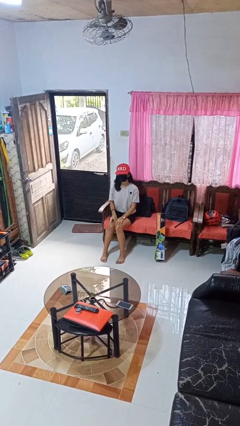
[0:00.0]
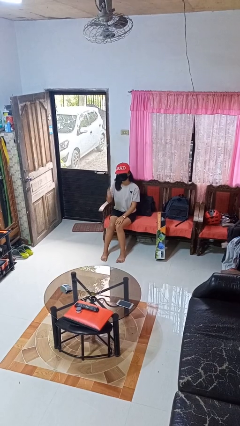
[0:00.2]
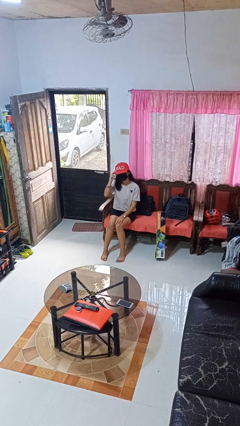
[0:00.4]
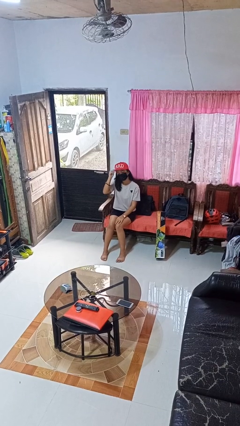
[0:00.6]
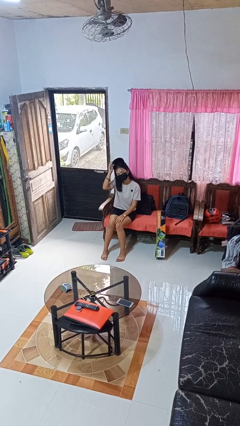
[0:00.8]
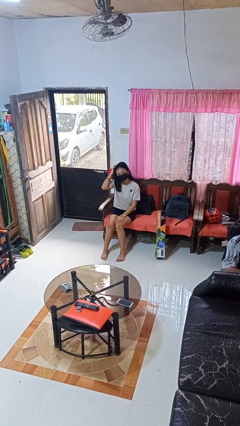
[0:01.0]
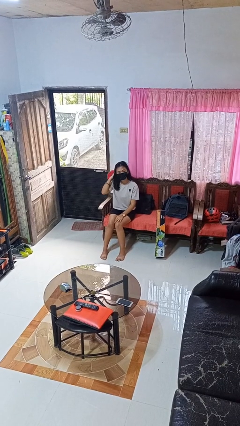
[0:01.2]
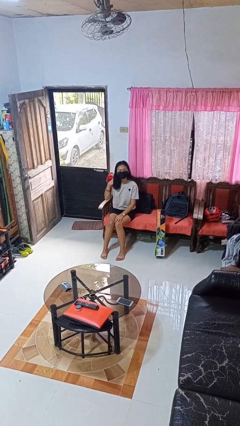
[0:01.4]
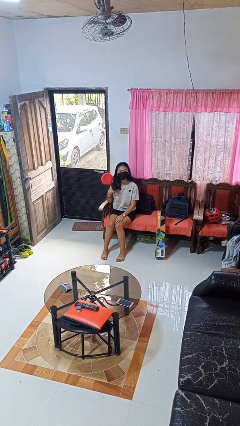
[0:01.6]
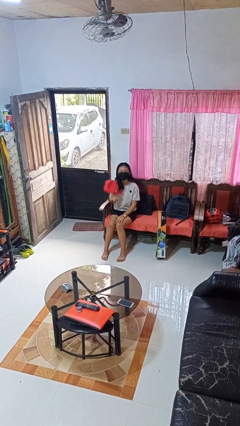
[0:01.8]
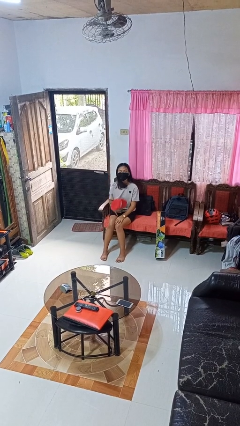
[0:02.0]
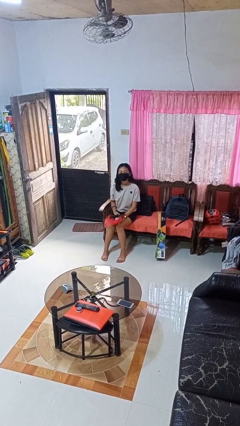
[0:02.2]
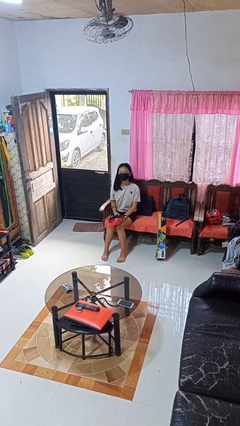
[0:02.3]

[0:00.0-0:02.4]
person takes off hat

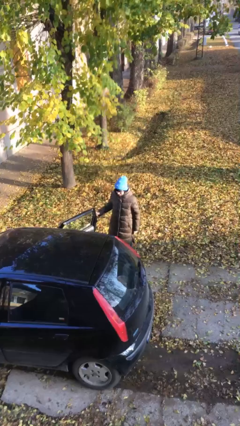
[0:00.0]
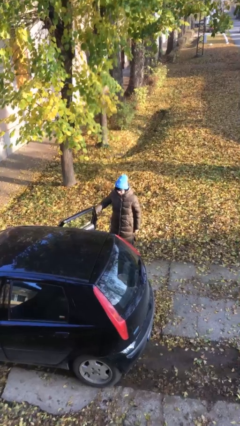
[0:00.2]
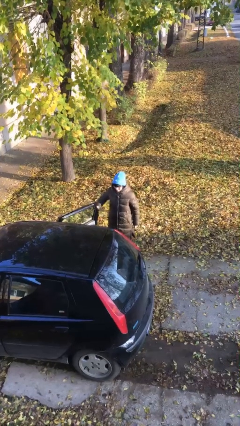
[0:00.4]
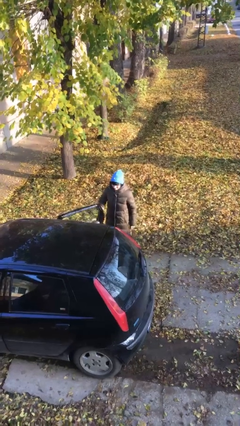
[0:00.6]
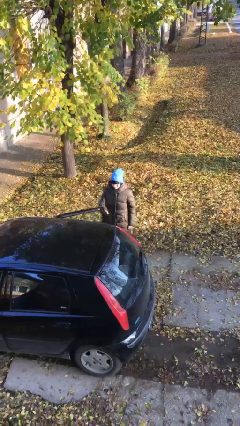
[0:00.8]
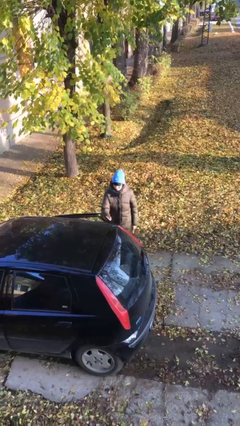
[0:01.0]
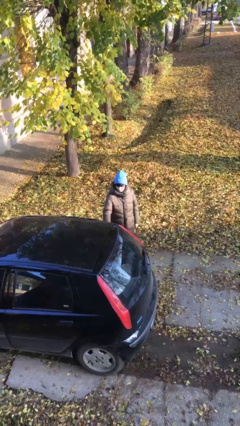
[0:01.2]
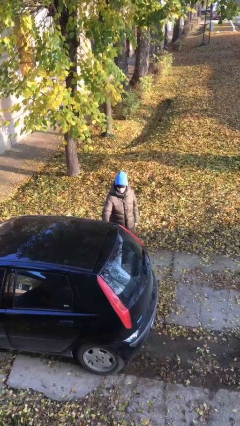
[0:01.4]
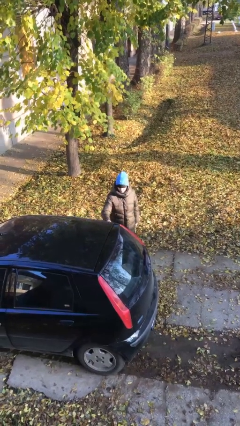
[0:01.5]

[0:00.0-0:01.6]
person closes car door

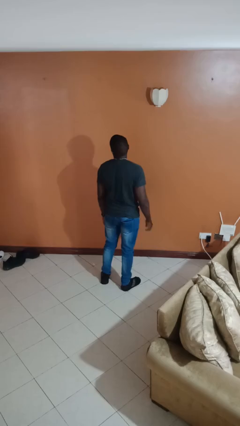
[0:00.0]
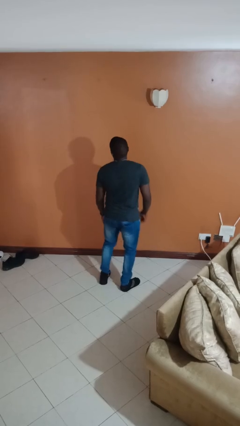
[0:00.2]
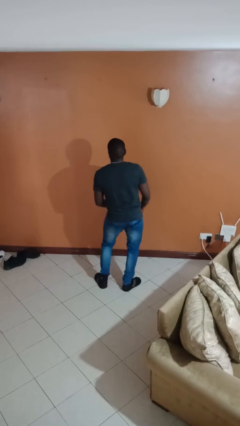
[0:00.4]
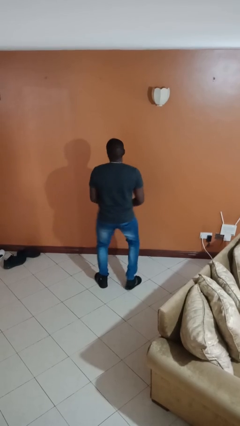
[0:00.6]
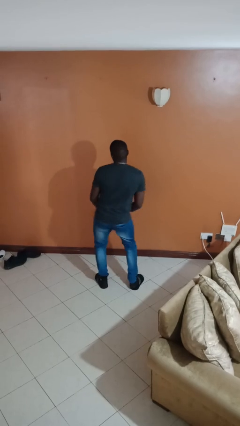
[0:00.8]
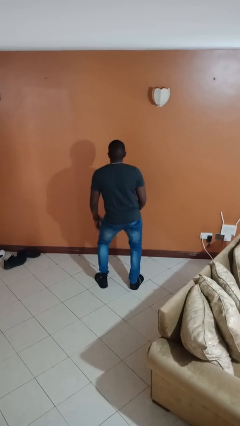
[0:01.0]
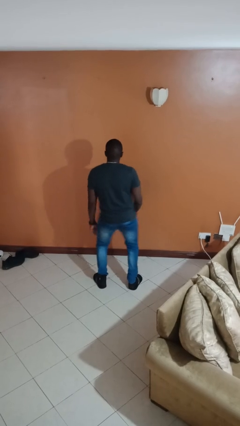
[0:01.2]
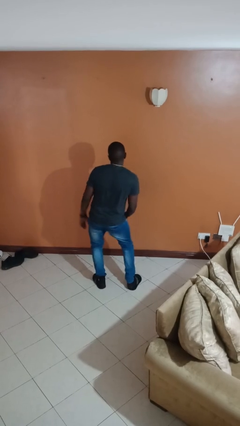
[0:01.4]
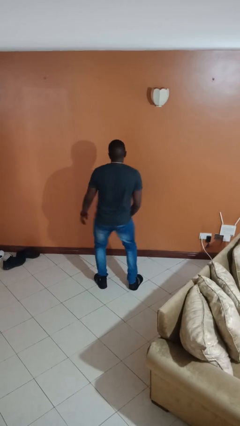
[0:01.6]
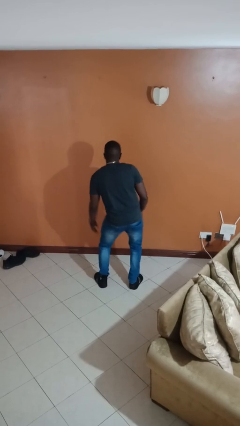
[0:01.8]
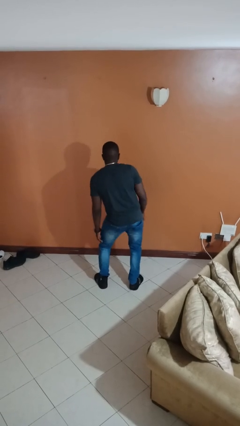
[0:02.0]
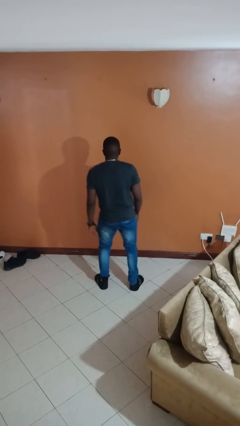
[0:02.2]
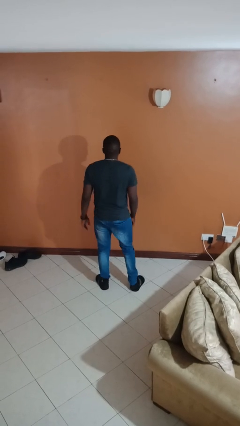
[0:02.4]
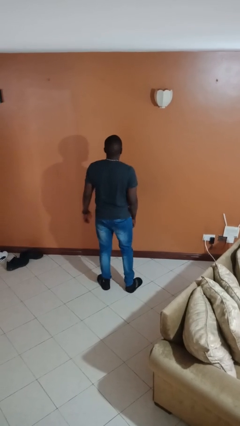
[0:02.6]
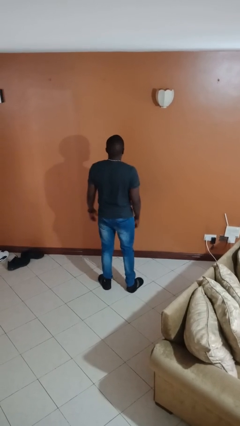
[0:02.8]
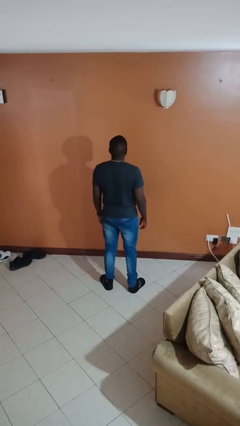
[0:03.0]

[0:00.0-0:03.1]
person wiggles hips

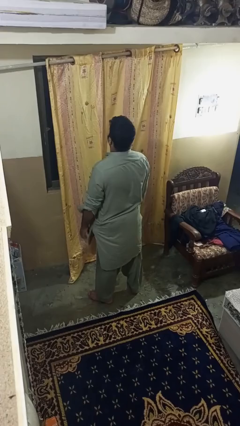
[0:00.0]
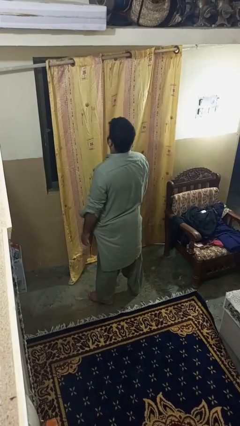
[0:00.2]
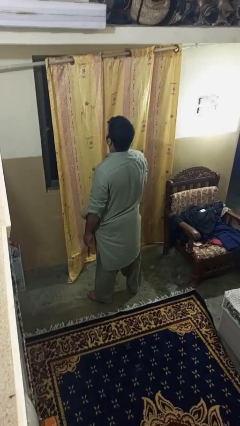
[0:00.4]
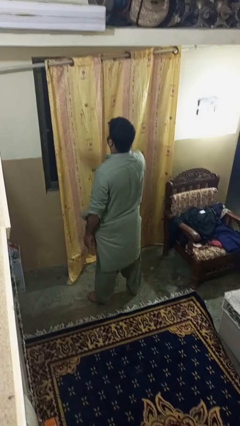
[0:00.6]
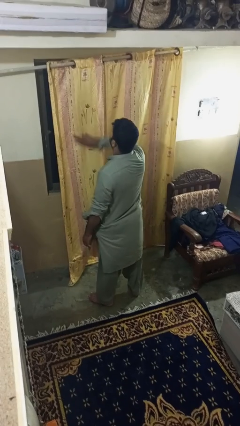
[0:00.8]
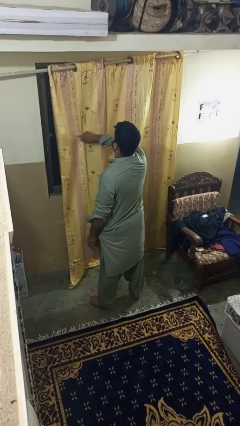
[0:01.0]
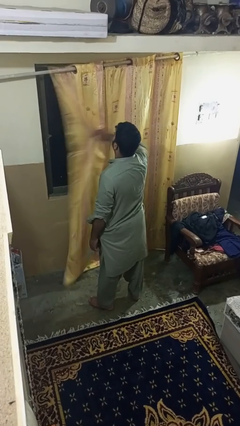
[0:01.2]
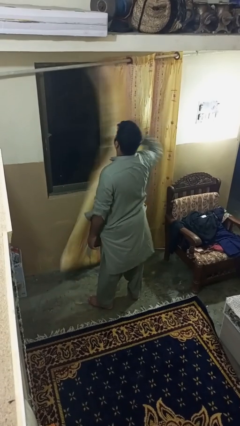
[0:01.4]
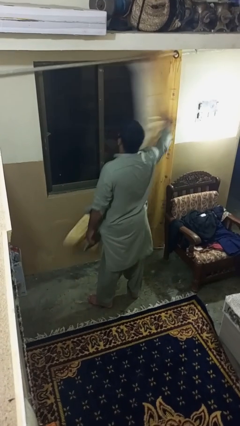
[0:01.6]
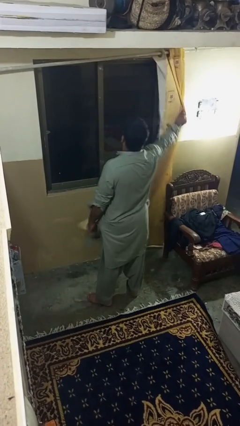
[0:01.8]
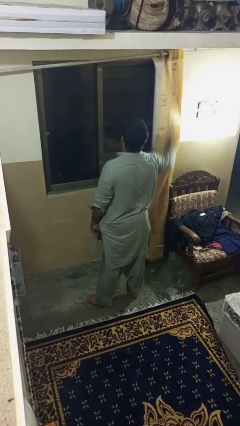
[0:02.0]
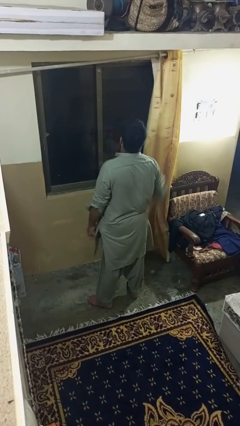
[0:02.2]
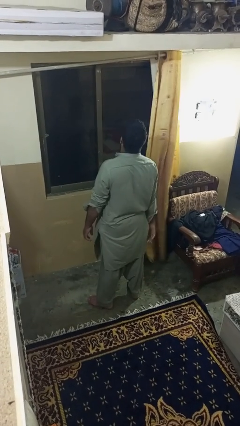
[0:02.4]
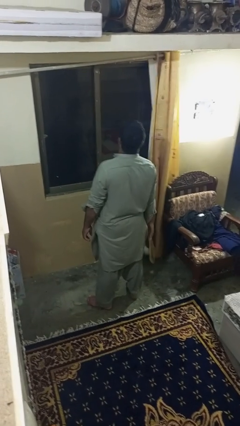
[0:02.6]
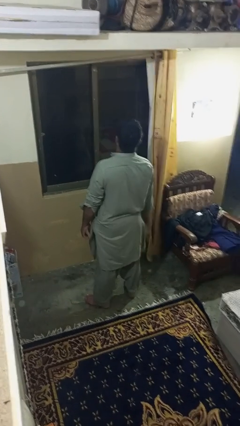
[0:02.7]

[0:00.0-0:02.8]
person opens curtains

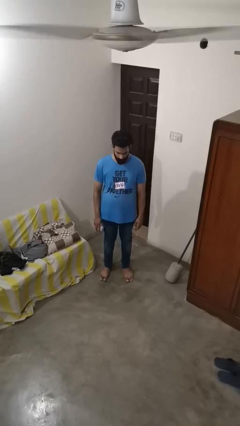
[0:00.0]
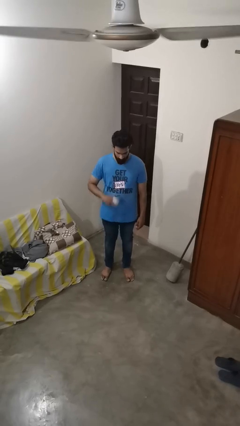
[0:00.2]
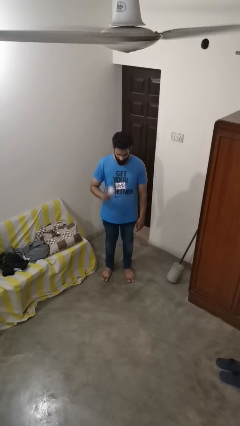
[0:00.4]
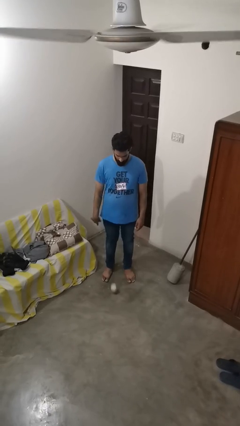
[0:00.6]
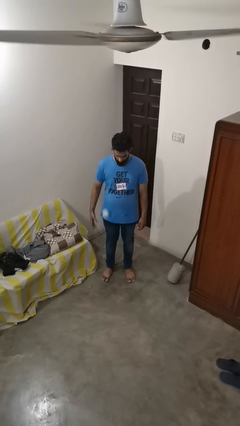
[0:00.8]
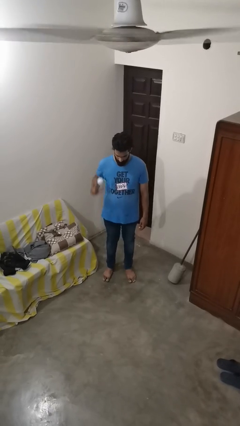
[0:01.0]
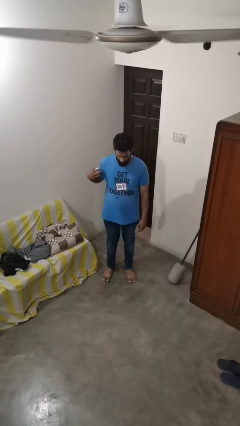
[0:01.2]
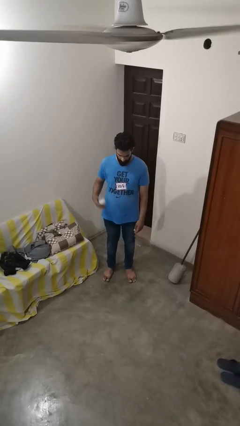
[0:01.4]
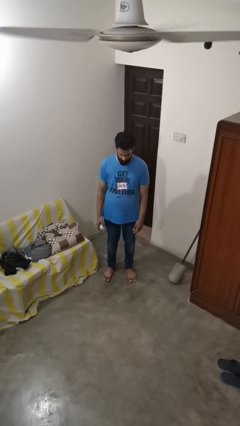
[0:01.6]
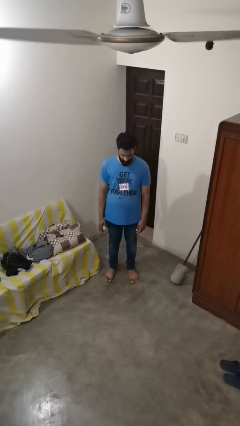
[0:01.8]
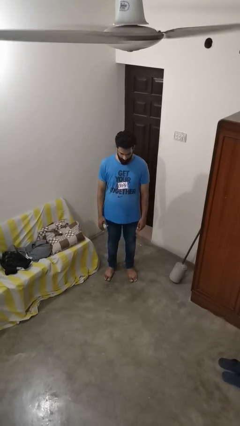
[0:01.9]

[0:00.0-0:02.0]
person bounces ball on floor

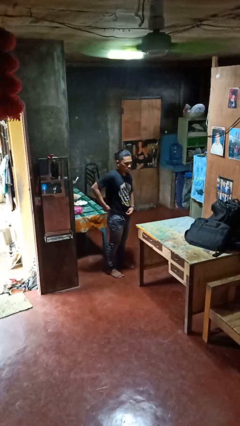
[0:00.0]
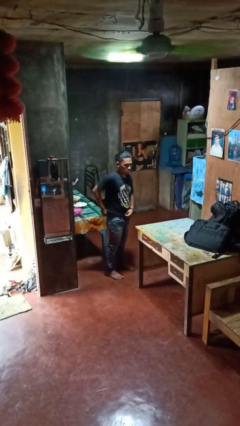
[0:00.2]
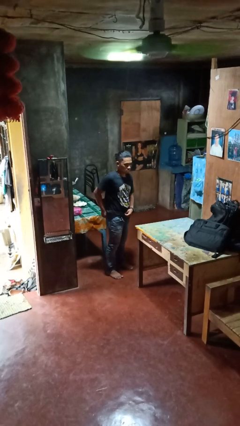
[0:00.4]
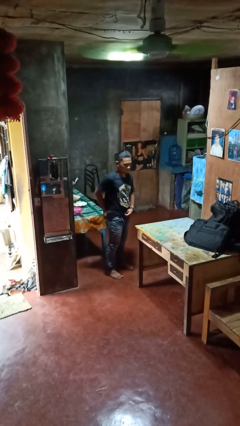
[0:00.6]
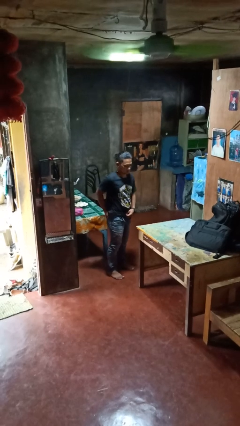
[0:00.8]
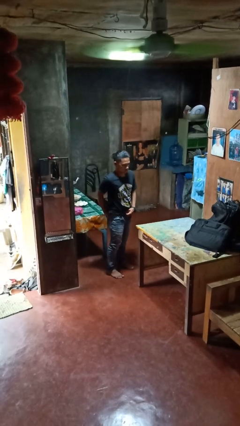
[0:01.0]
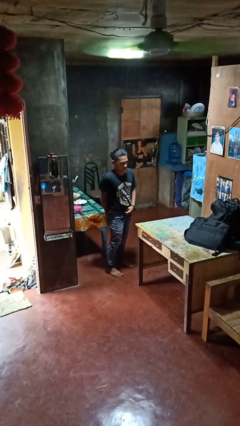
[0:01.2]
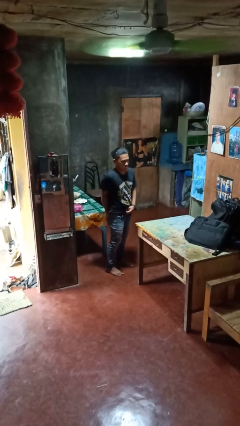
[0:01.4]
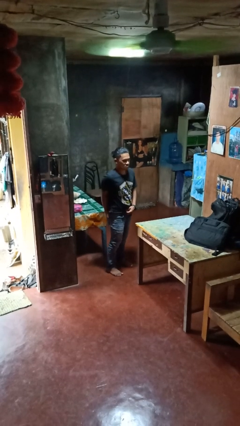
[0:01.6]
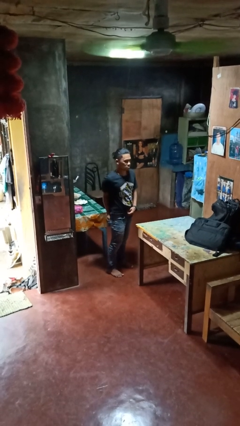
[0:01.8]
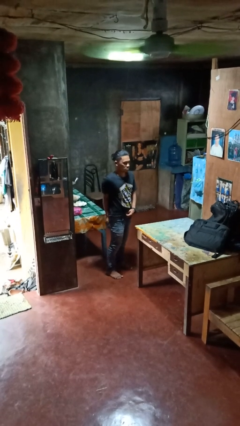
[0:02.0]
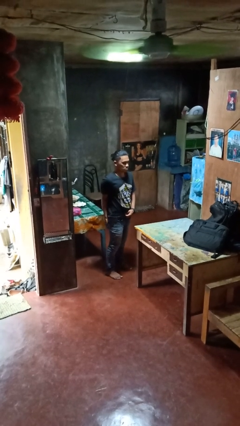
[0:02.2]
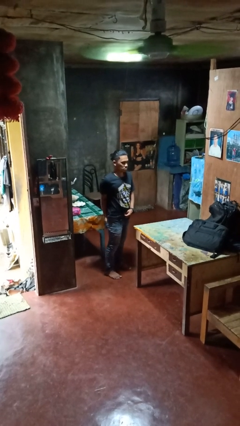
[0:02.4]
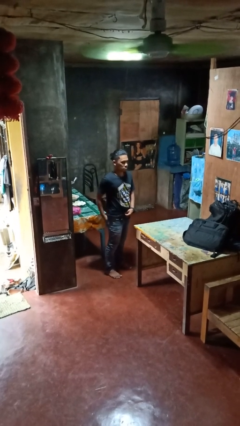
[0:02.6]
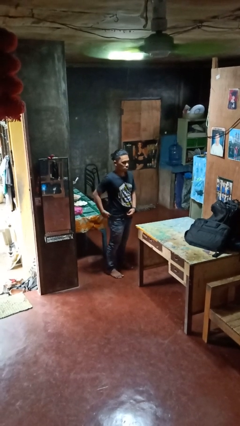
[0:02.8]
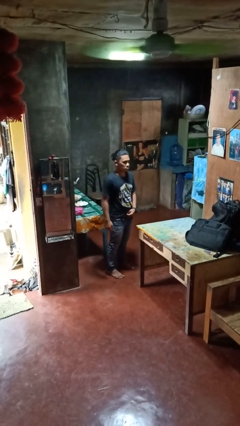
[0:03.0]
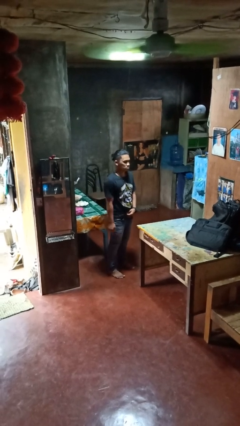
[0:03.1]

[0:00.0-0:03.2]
person puts hands in back pockets

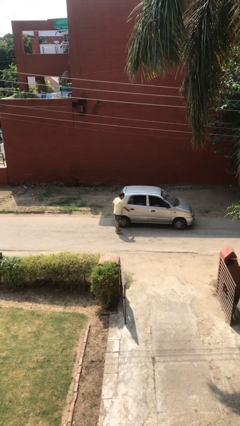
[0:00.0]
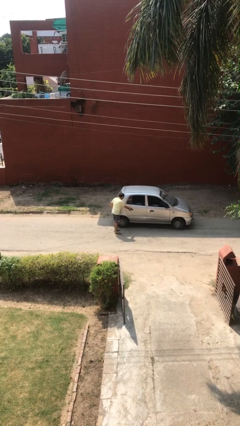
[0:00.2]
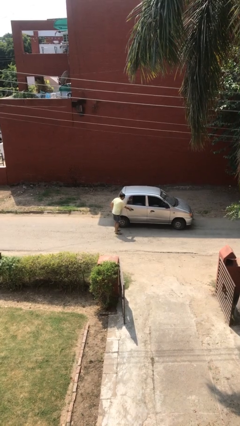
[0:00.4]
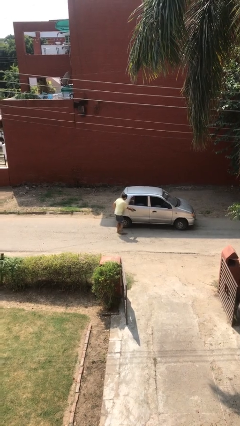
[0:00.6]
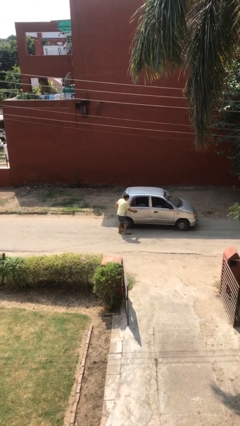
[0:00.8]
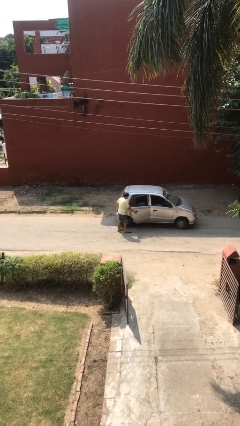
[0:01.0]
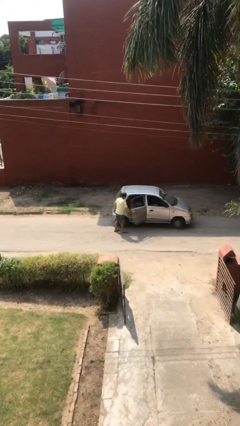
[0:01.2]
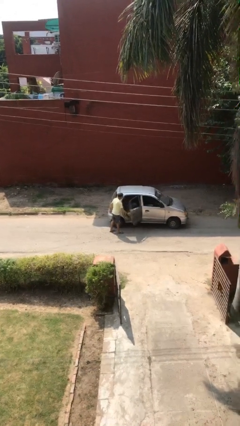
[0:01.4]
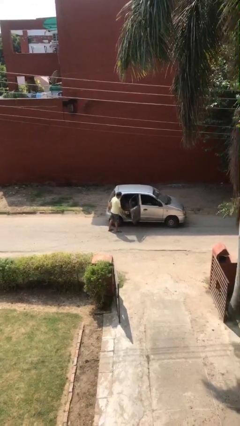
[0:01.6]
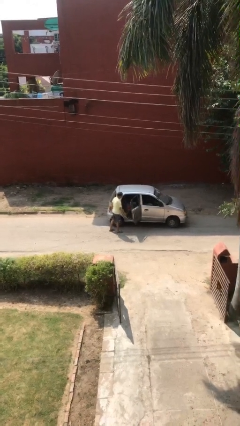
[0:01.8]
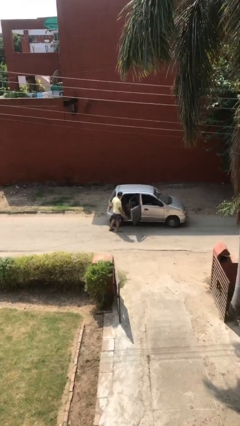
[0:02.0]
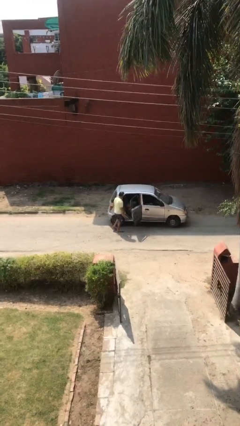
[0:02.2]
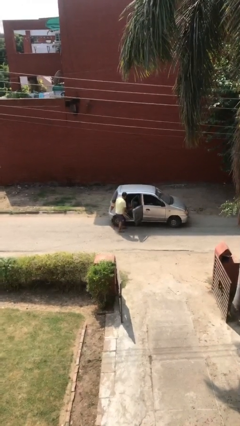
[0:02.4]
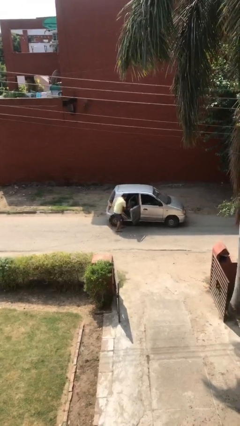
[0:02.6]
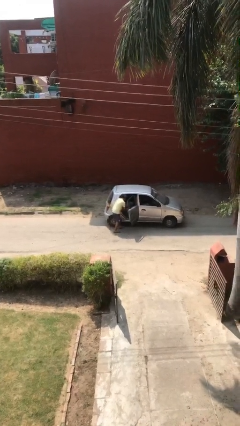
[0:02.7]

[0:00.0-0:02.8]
person opens car door
